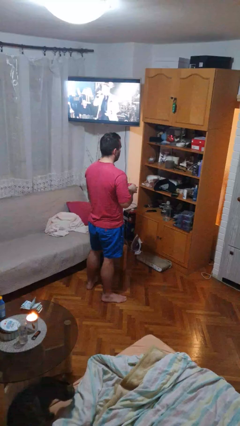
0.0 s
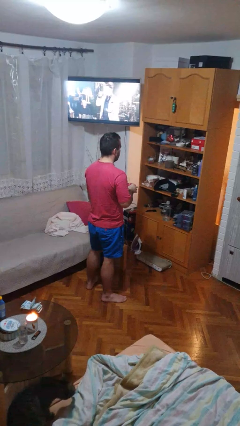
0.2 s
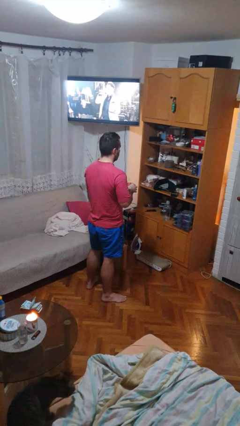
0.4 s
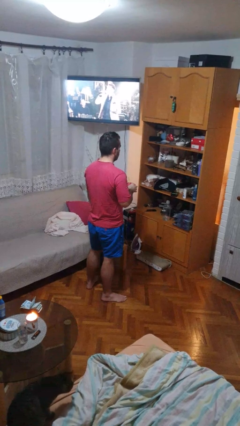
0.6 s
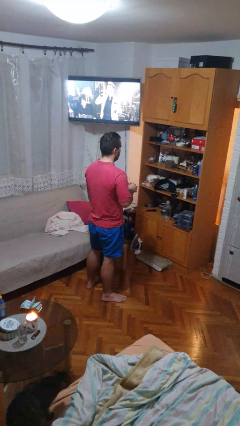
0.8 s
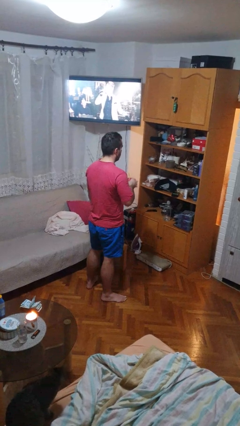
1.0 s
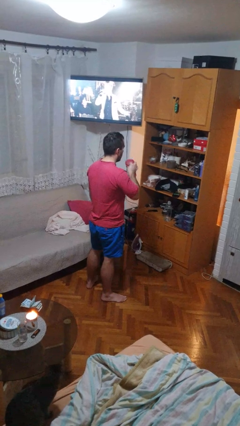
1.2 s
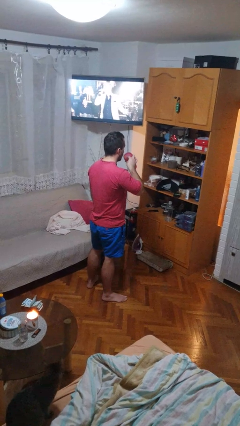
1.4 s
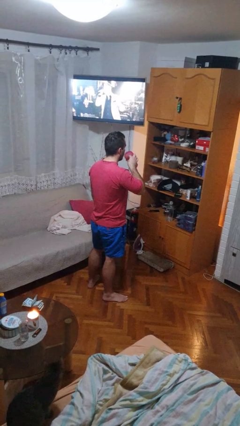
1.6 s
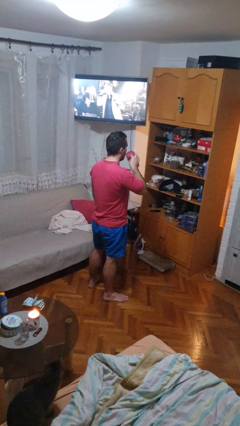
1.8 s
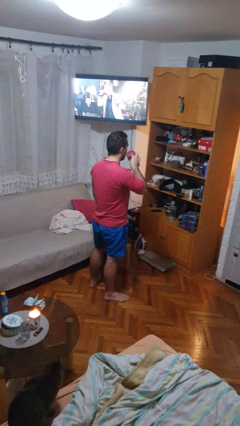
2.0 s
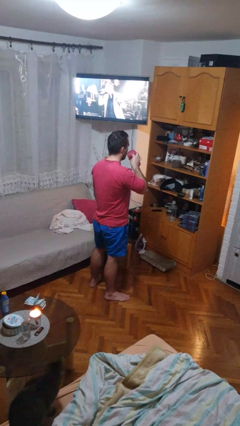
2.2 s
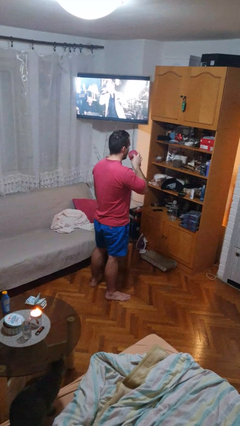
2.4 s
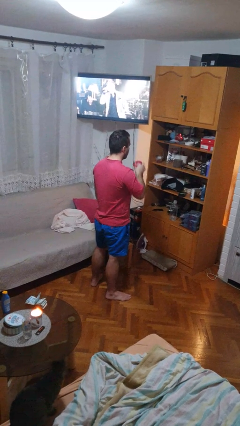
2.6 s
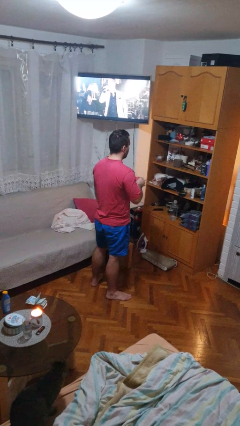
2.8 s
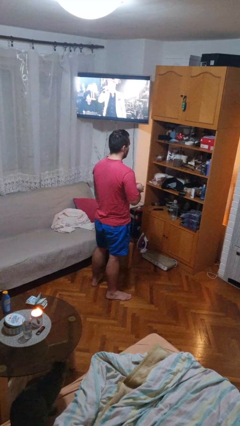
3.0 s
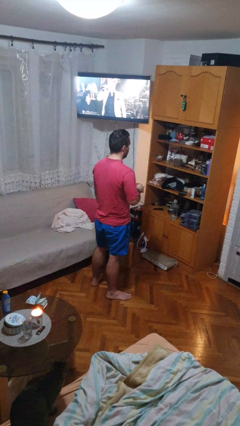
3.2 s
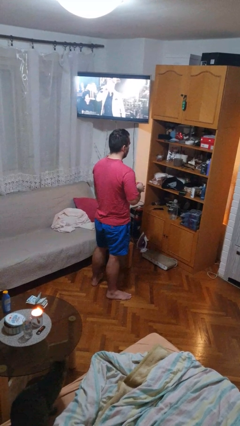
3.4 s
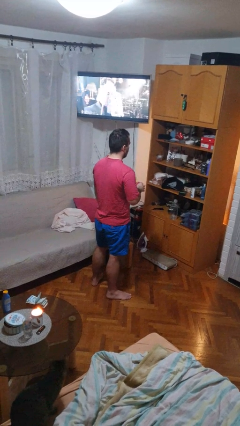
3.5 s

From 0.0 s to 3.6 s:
person drinks from straw

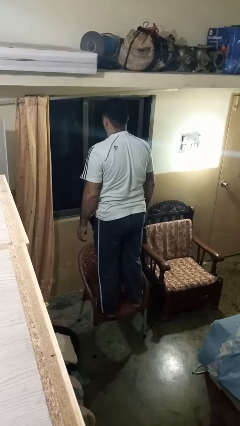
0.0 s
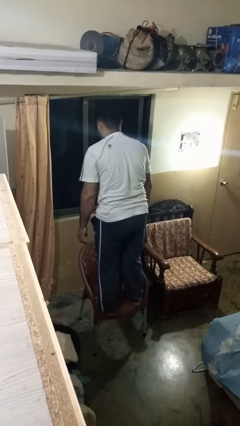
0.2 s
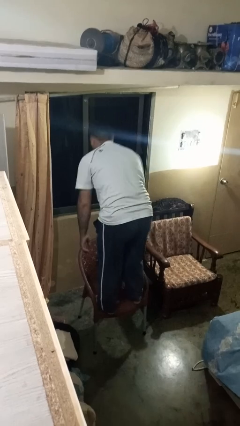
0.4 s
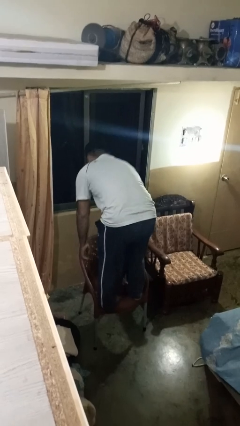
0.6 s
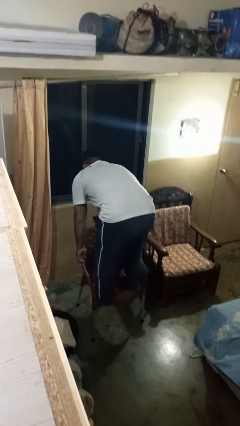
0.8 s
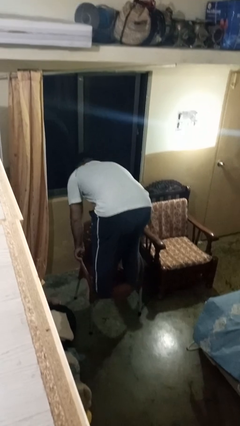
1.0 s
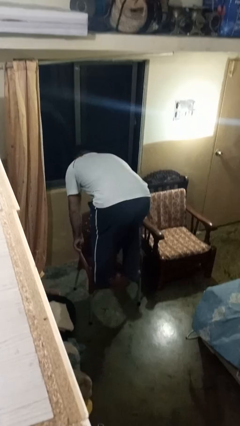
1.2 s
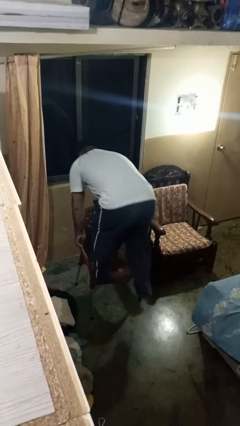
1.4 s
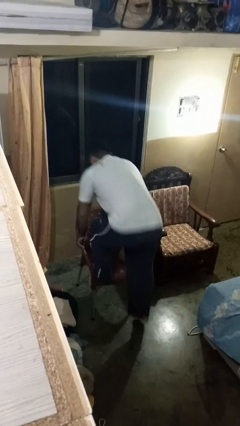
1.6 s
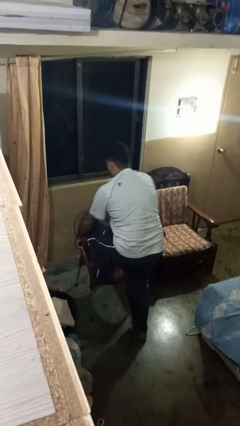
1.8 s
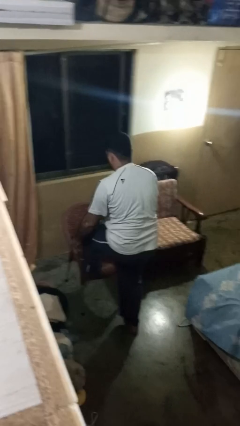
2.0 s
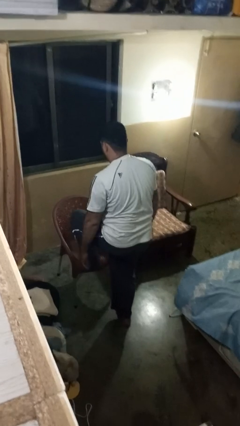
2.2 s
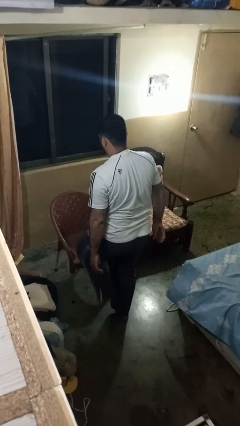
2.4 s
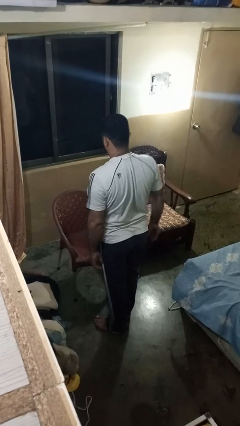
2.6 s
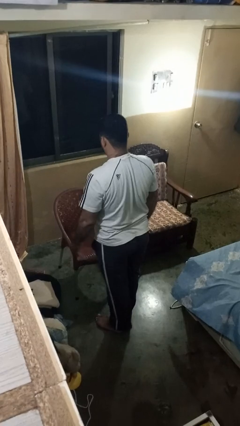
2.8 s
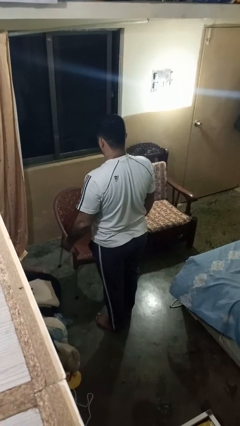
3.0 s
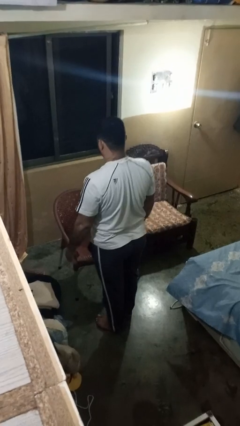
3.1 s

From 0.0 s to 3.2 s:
person climbs off chair

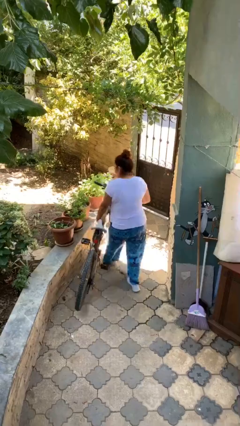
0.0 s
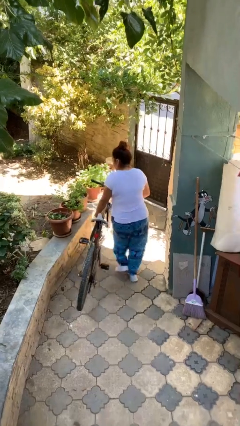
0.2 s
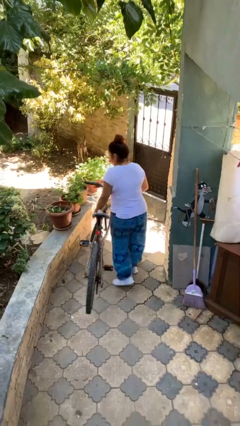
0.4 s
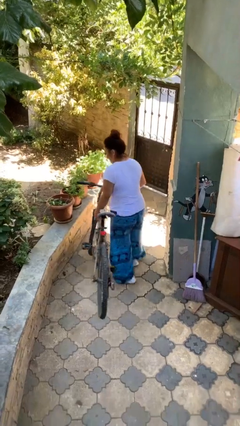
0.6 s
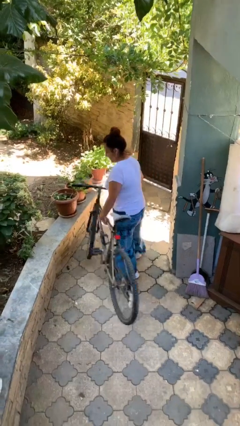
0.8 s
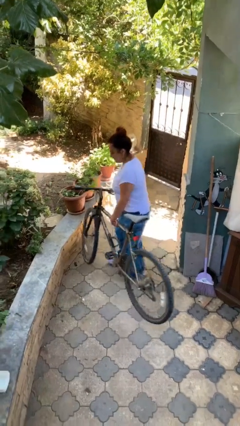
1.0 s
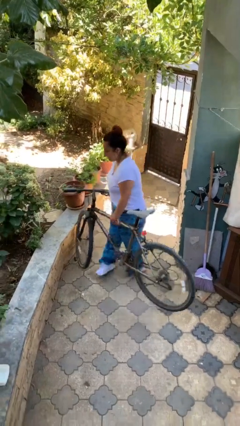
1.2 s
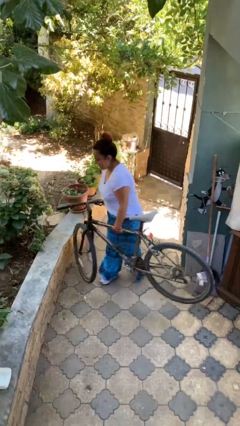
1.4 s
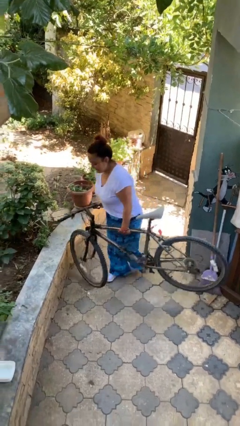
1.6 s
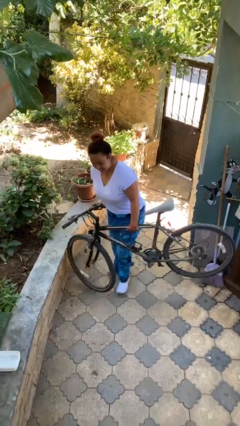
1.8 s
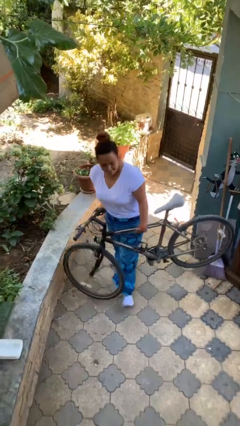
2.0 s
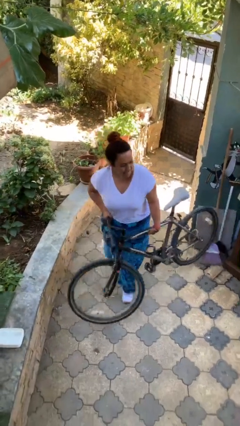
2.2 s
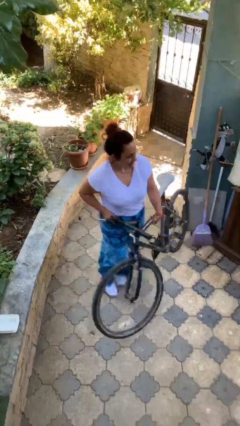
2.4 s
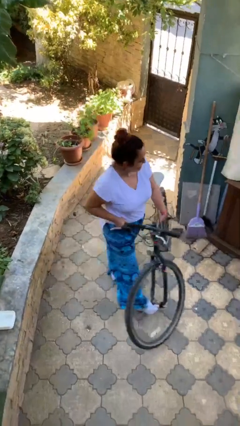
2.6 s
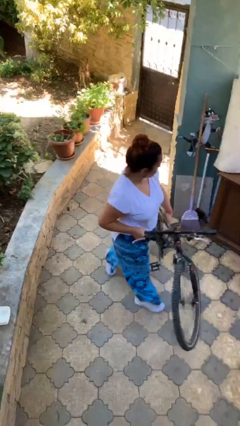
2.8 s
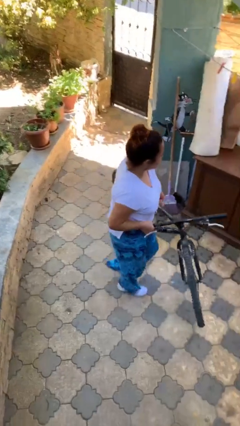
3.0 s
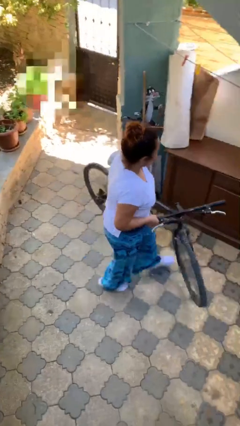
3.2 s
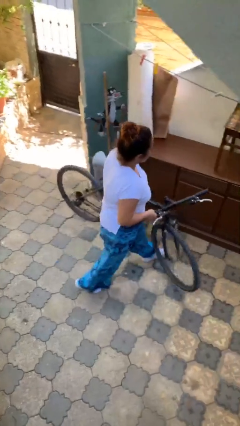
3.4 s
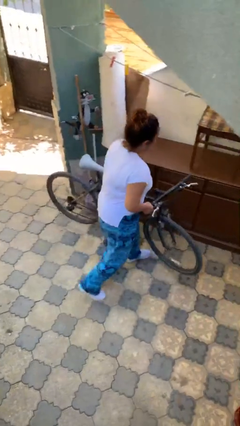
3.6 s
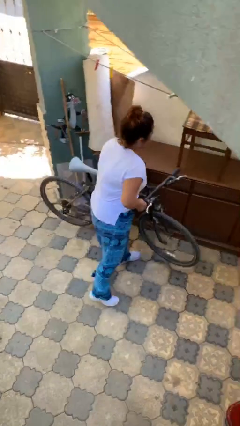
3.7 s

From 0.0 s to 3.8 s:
person carries heavy object

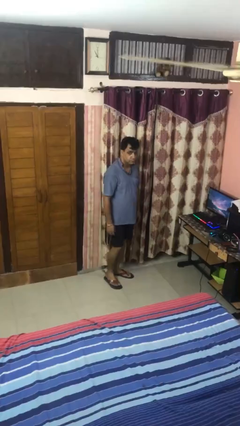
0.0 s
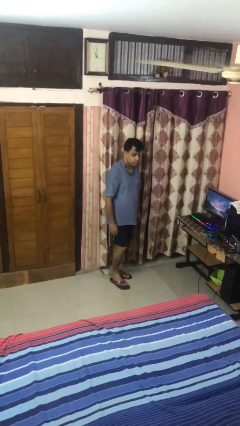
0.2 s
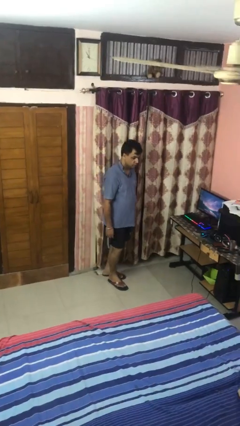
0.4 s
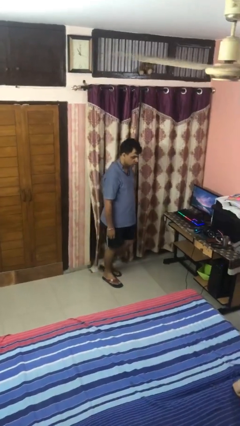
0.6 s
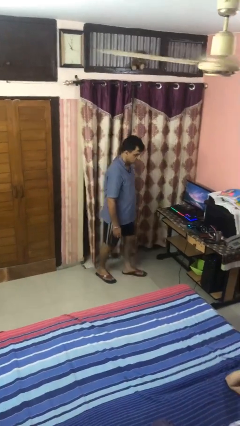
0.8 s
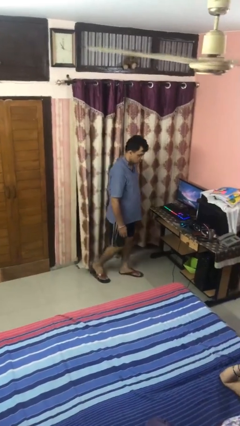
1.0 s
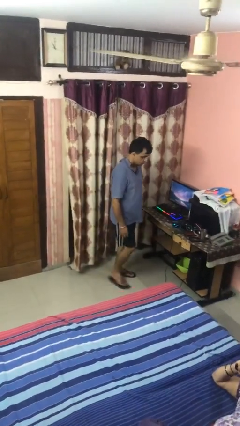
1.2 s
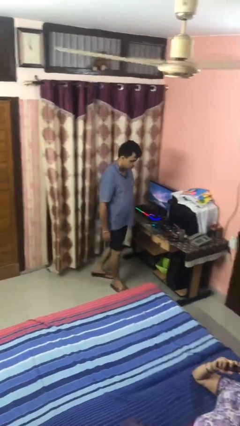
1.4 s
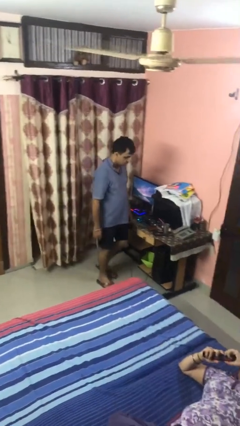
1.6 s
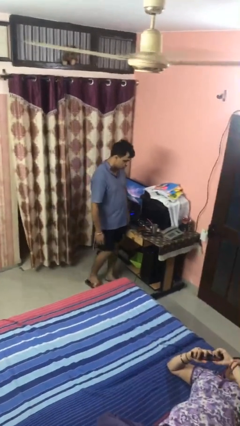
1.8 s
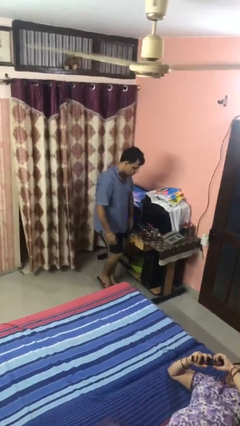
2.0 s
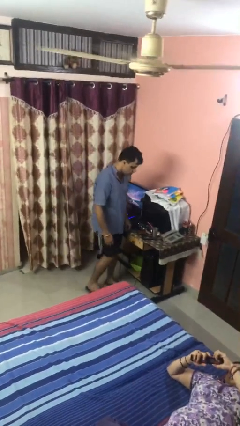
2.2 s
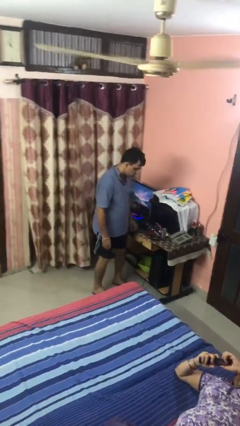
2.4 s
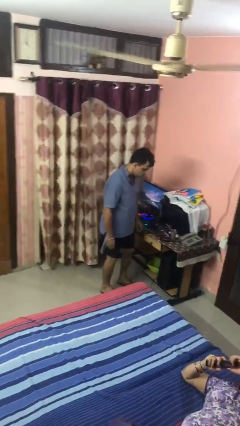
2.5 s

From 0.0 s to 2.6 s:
person bumps into table

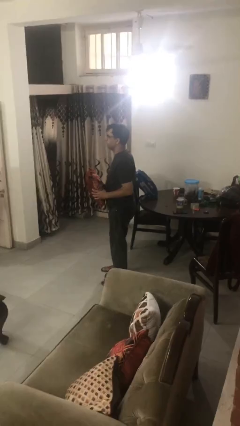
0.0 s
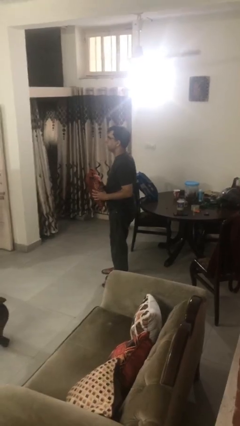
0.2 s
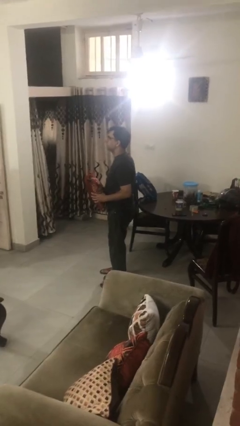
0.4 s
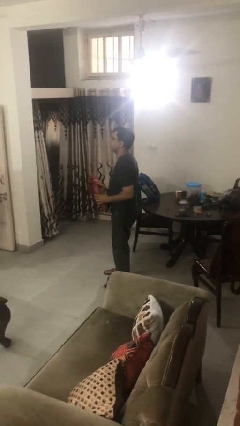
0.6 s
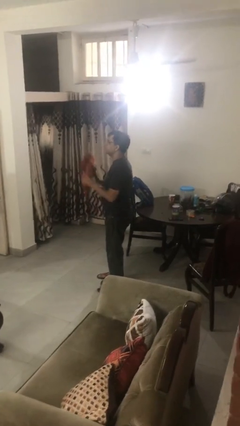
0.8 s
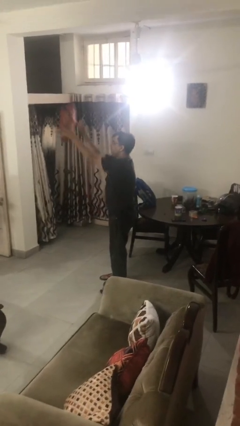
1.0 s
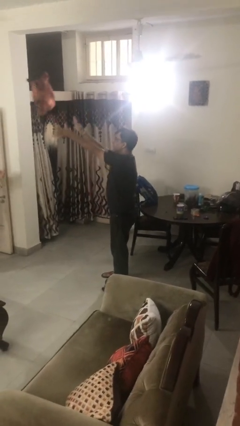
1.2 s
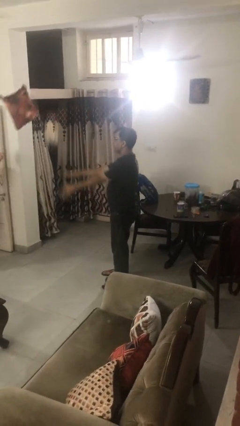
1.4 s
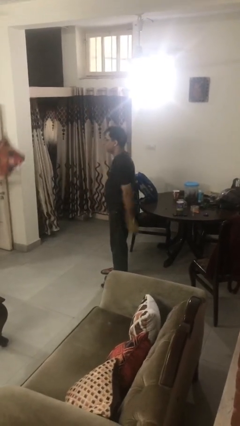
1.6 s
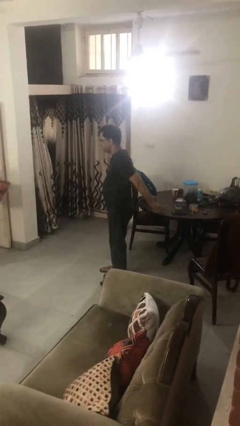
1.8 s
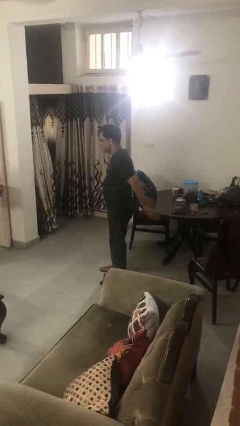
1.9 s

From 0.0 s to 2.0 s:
person throws object to person

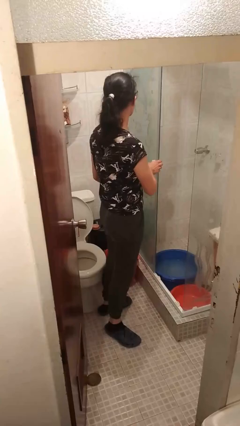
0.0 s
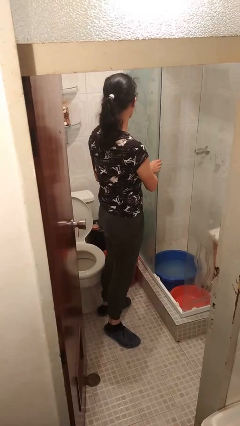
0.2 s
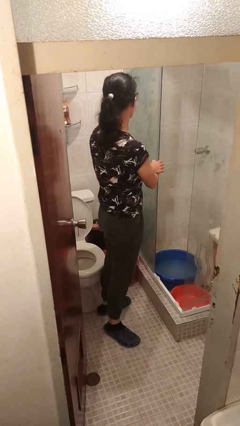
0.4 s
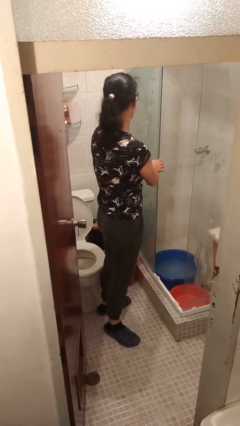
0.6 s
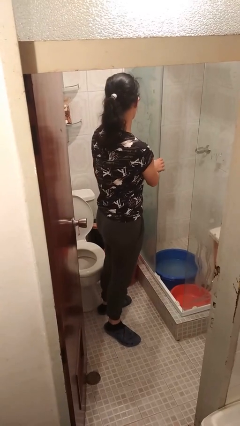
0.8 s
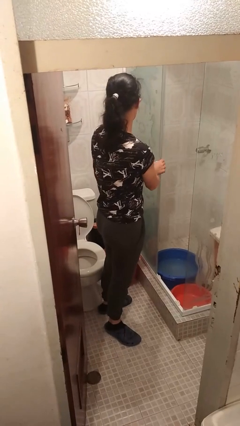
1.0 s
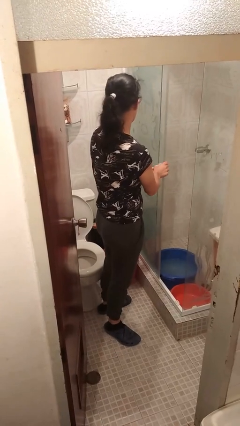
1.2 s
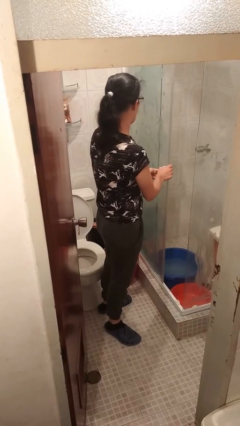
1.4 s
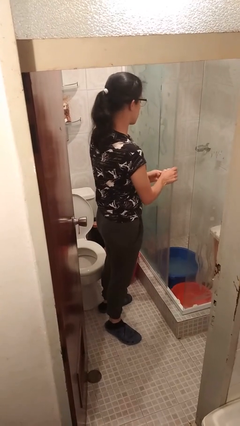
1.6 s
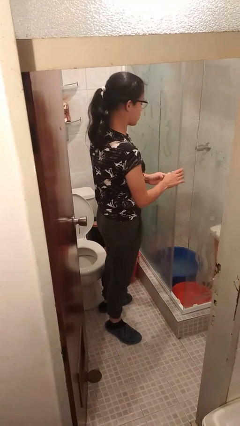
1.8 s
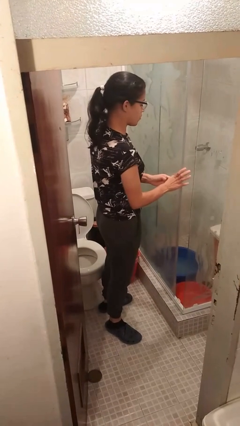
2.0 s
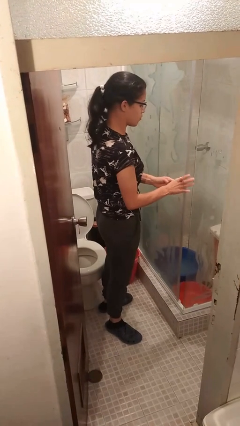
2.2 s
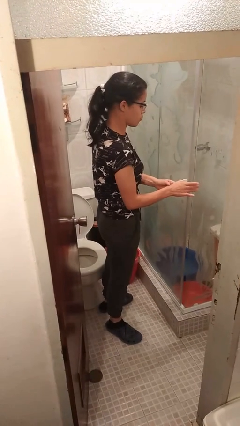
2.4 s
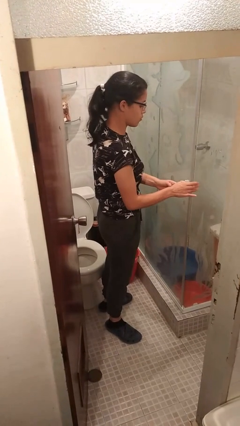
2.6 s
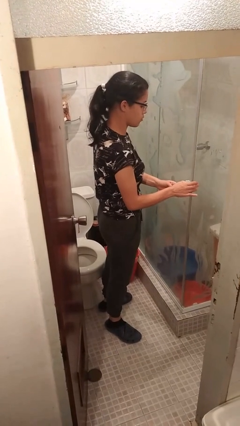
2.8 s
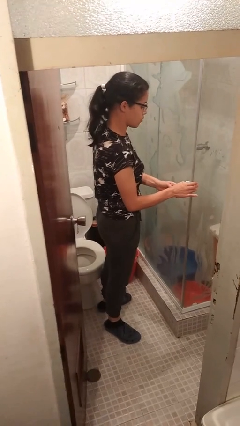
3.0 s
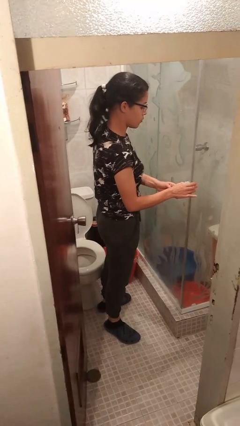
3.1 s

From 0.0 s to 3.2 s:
person closes sliding door
